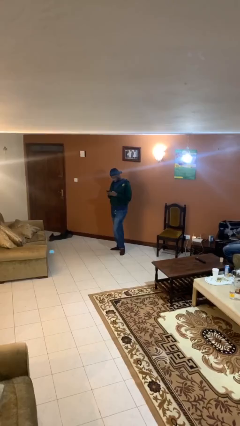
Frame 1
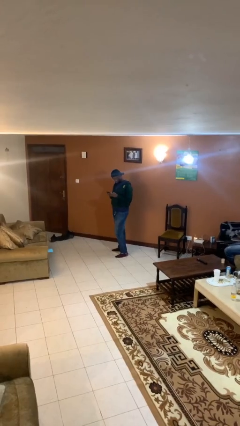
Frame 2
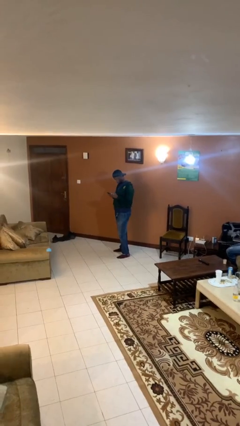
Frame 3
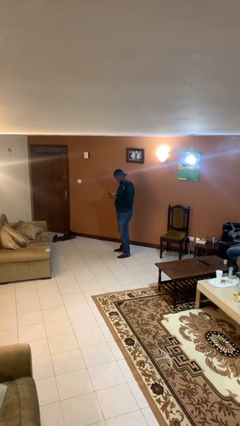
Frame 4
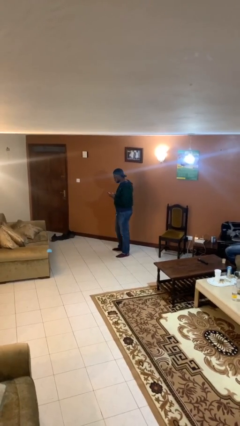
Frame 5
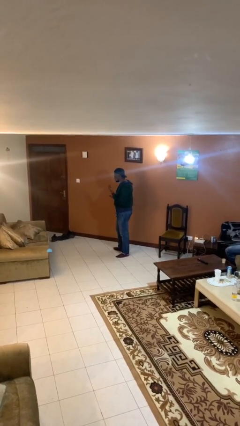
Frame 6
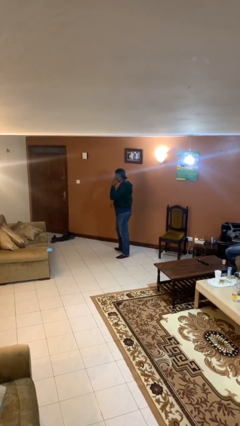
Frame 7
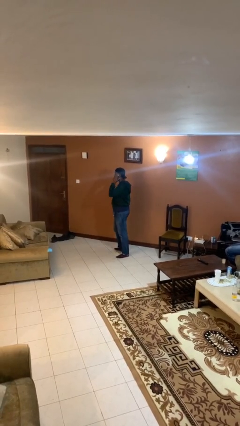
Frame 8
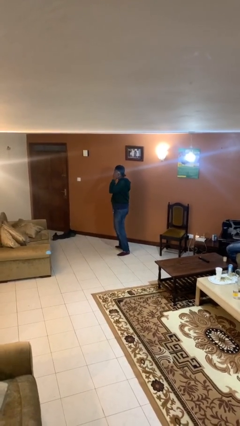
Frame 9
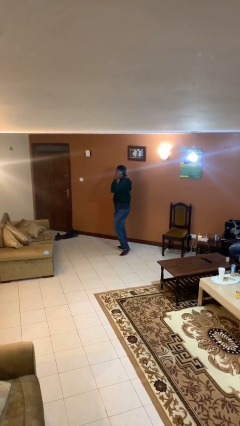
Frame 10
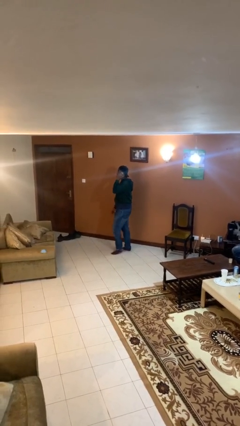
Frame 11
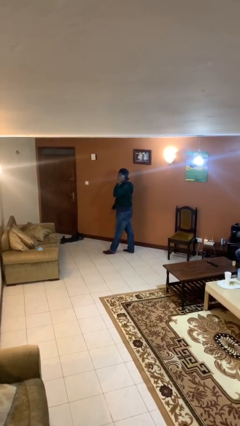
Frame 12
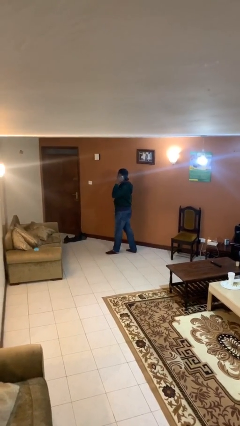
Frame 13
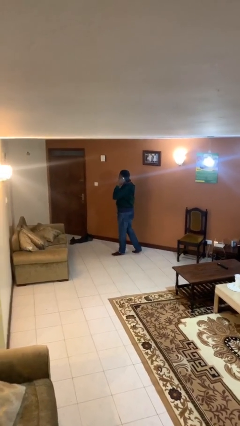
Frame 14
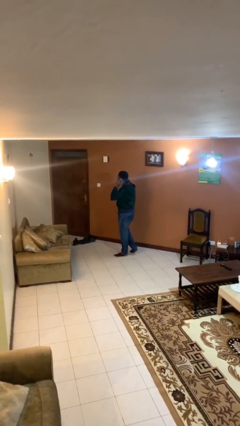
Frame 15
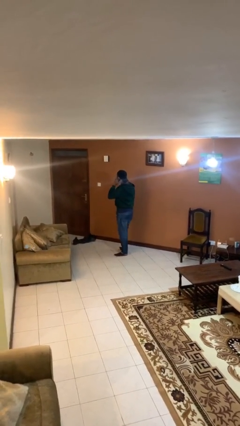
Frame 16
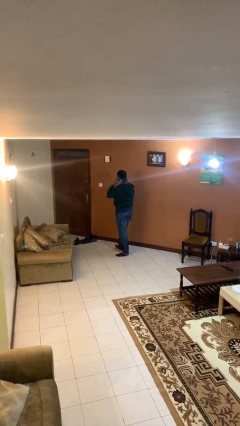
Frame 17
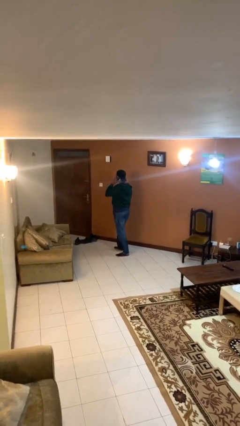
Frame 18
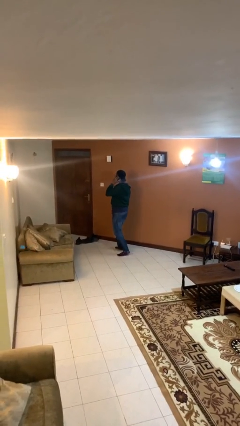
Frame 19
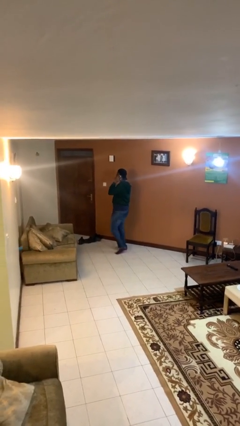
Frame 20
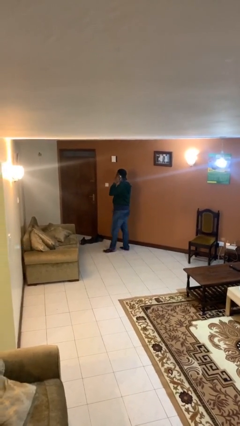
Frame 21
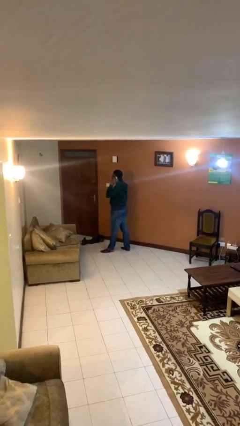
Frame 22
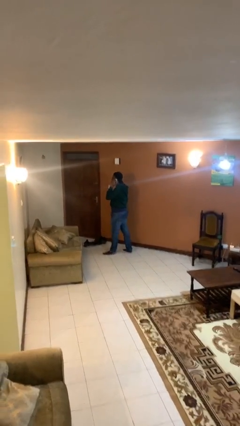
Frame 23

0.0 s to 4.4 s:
person talks on phone

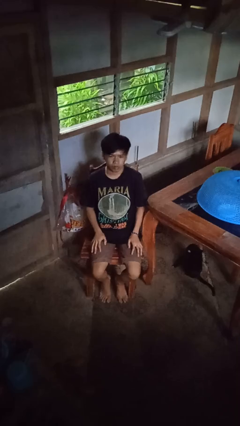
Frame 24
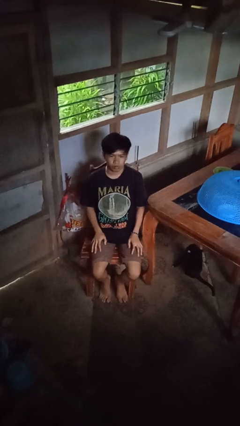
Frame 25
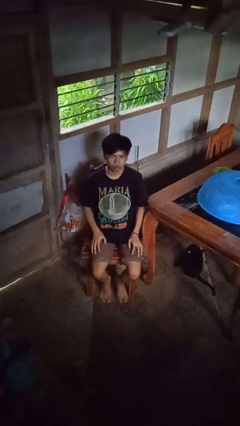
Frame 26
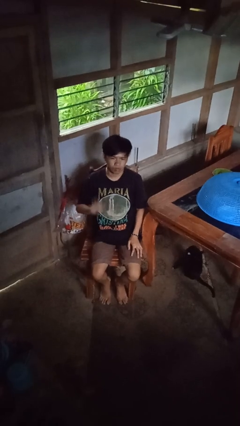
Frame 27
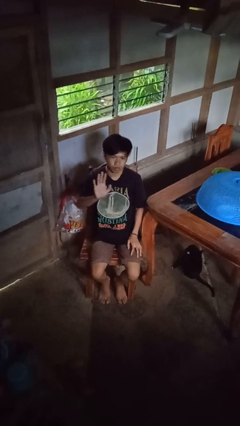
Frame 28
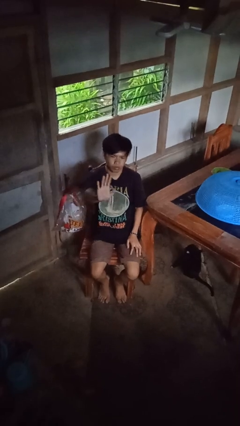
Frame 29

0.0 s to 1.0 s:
person gestures stop

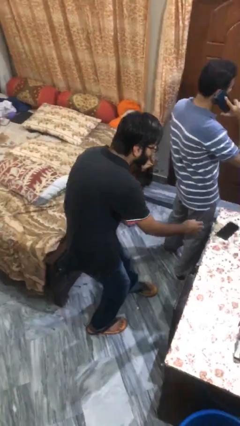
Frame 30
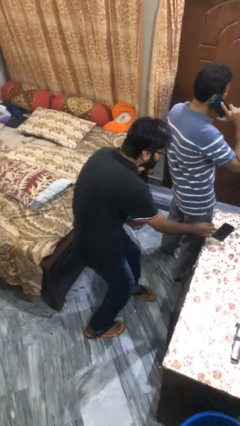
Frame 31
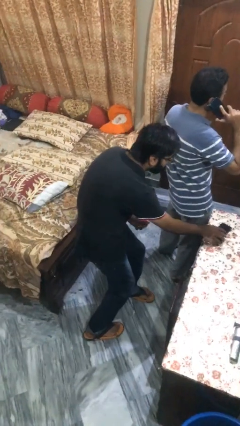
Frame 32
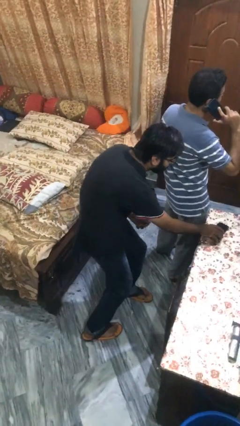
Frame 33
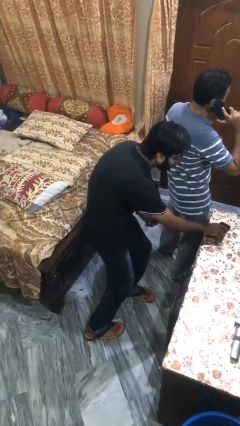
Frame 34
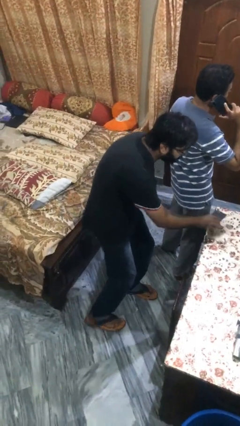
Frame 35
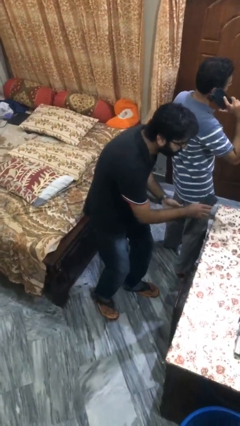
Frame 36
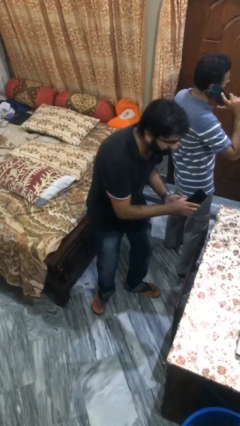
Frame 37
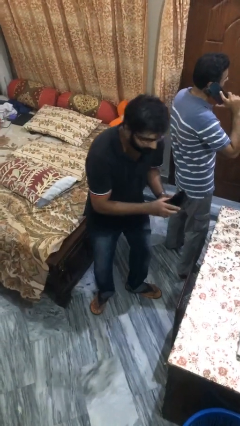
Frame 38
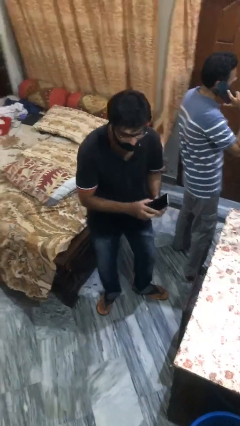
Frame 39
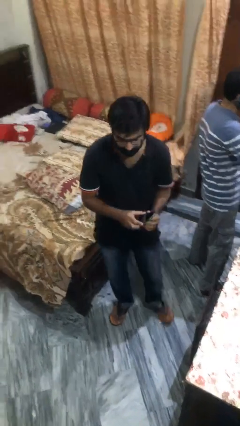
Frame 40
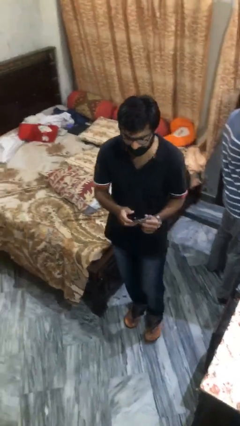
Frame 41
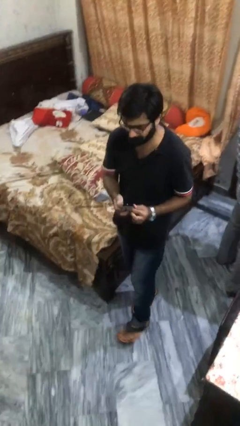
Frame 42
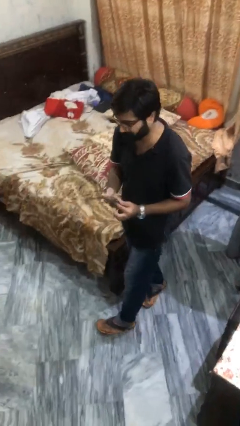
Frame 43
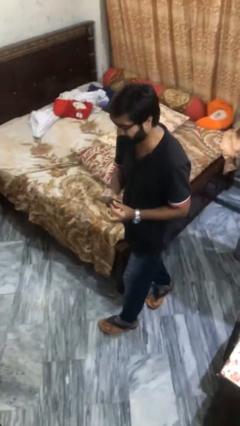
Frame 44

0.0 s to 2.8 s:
person steals object from person

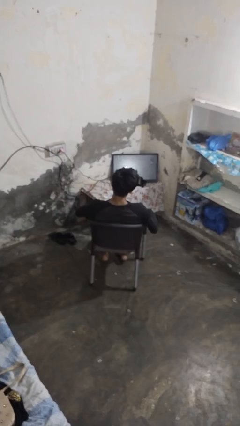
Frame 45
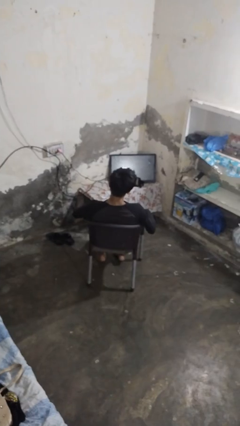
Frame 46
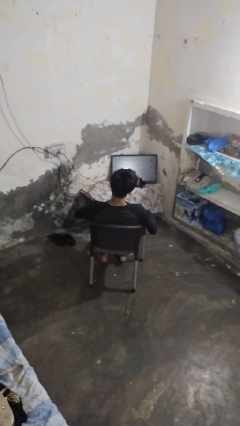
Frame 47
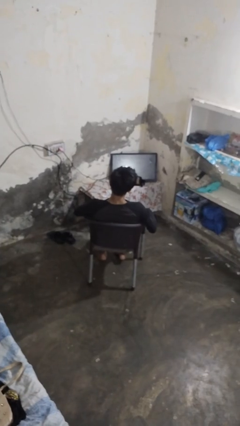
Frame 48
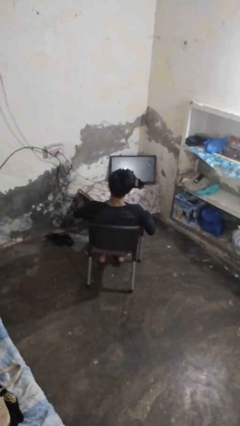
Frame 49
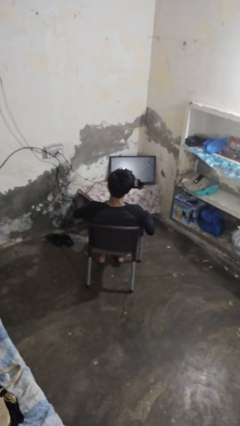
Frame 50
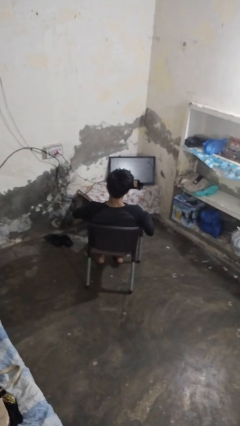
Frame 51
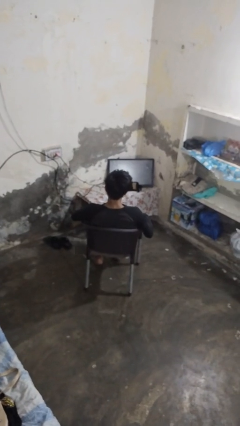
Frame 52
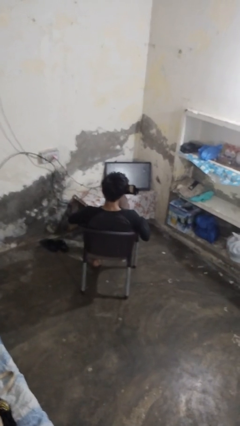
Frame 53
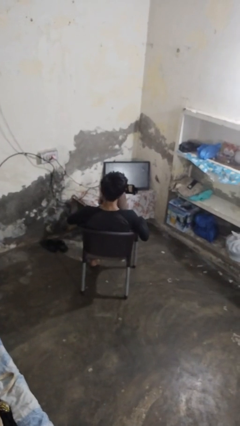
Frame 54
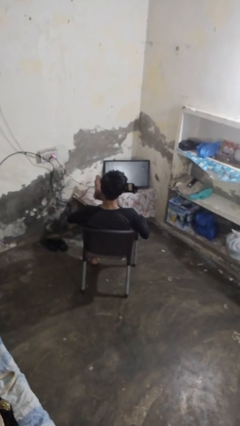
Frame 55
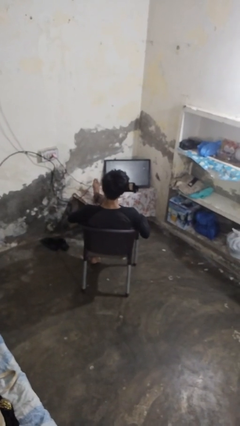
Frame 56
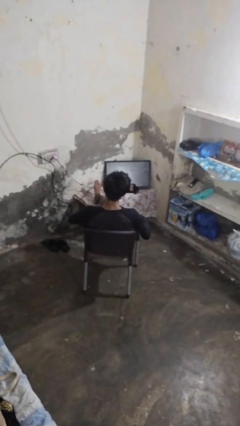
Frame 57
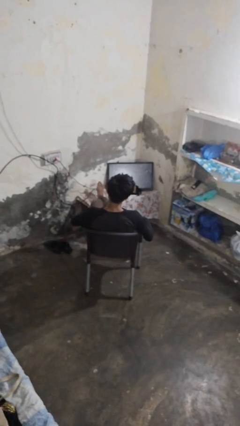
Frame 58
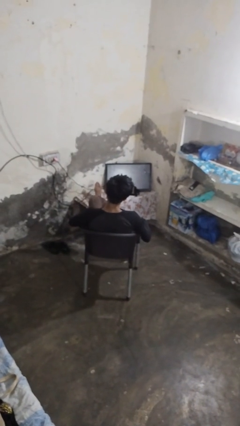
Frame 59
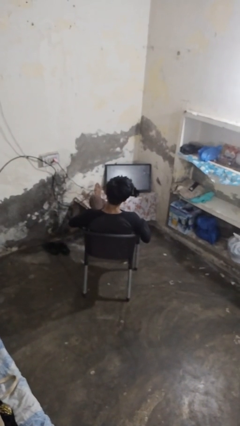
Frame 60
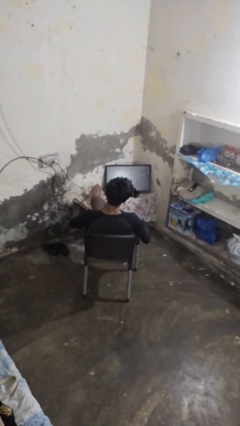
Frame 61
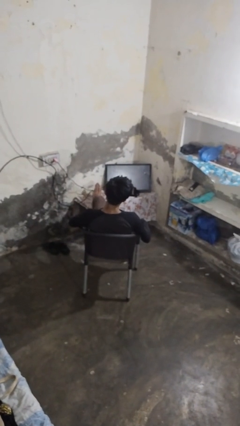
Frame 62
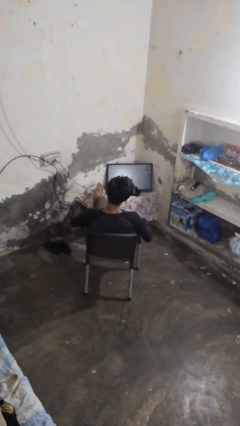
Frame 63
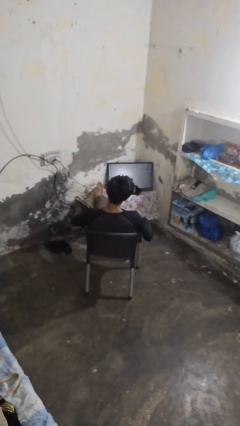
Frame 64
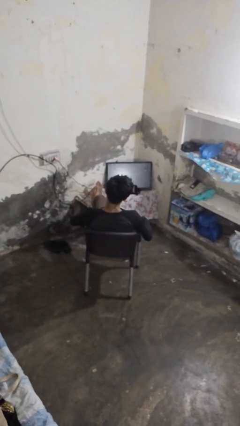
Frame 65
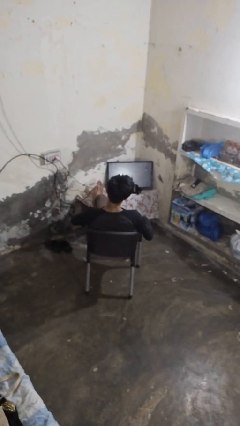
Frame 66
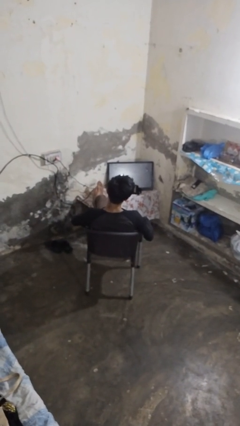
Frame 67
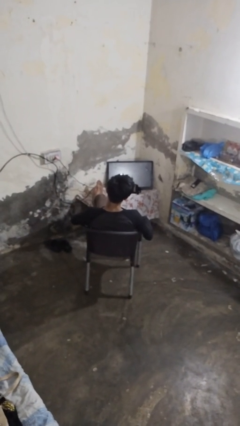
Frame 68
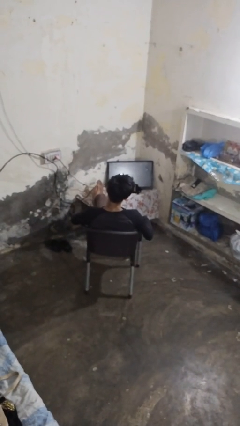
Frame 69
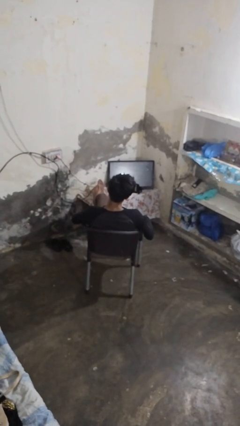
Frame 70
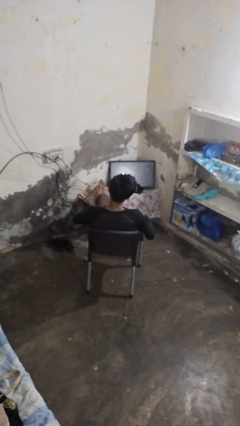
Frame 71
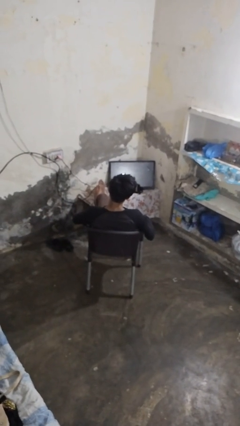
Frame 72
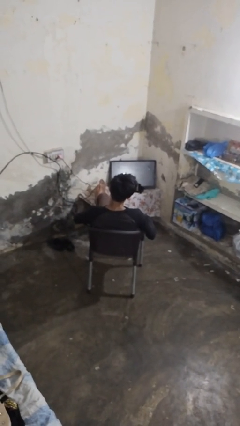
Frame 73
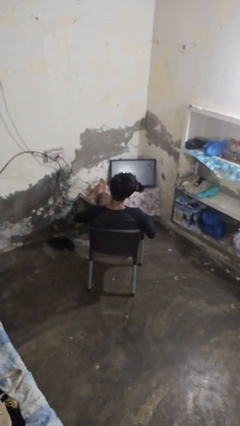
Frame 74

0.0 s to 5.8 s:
person puts feet up

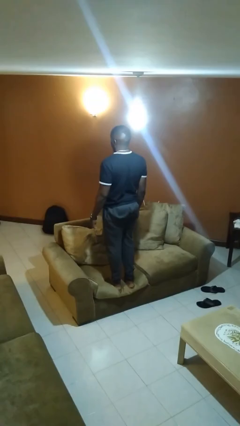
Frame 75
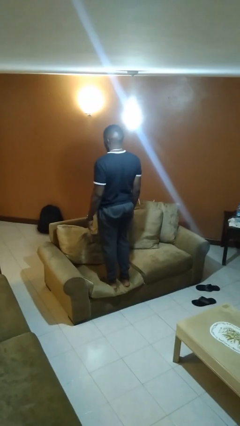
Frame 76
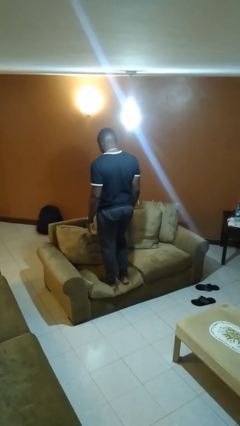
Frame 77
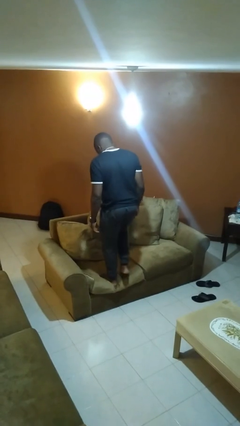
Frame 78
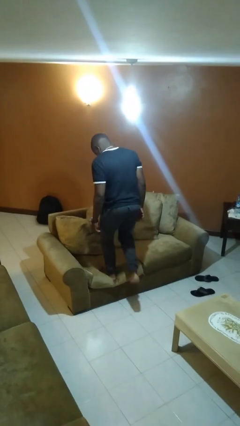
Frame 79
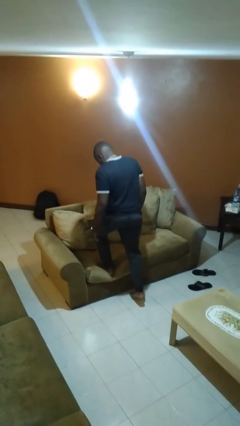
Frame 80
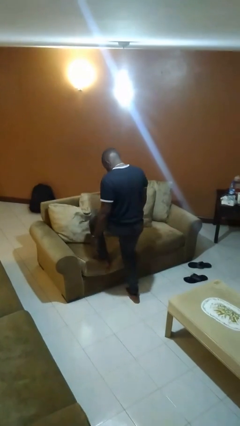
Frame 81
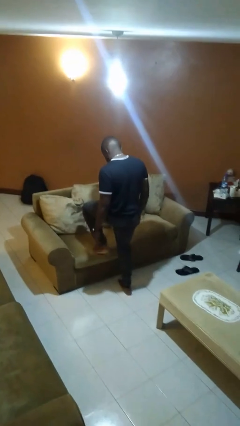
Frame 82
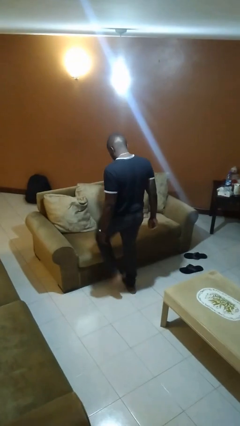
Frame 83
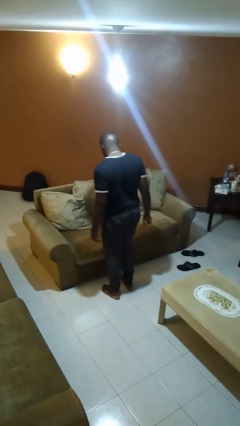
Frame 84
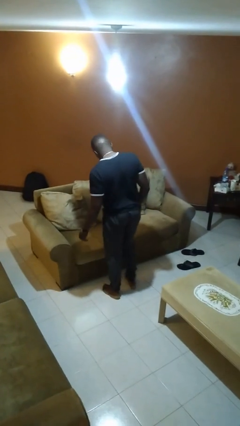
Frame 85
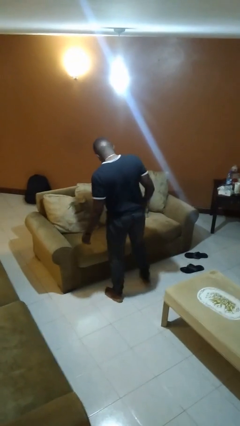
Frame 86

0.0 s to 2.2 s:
person climbs off couch

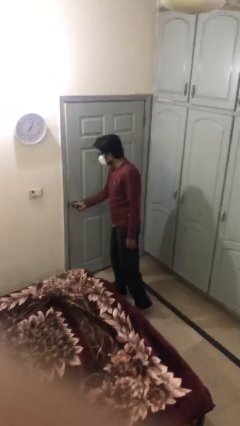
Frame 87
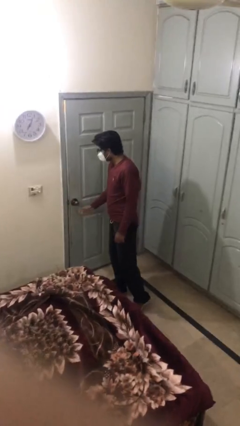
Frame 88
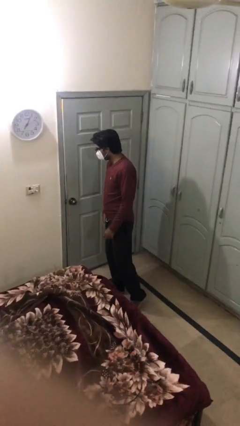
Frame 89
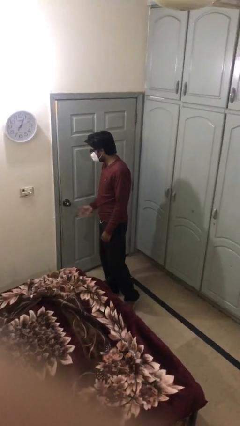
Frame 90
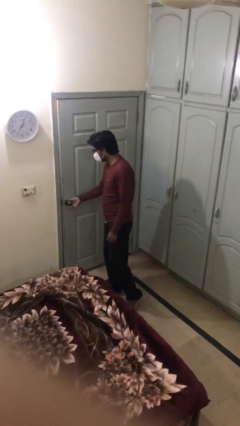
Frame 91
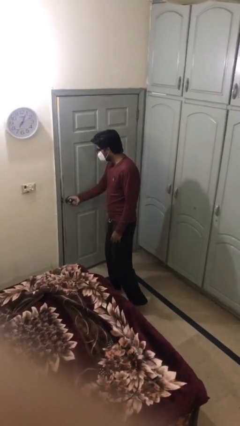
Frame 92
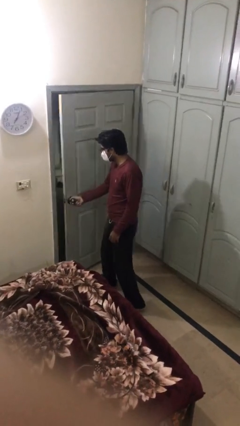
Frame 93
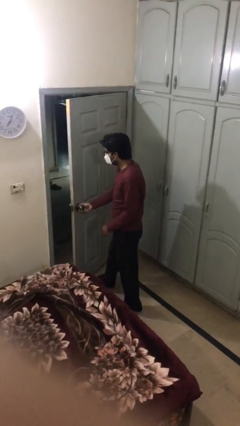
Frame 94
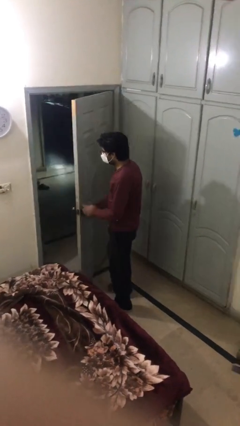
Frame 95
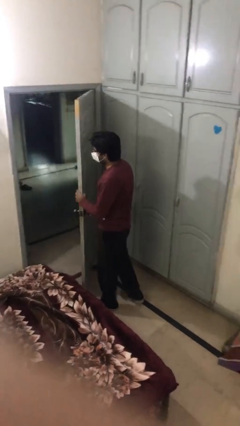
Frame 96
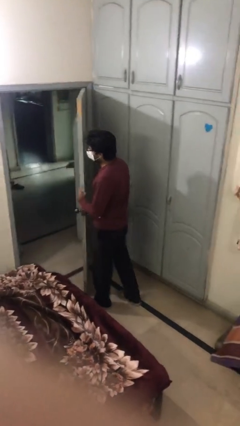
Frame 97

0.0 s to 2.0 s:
person opens facility door
